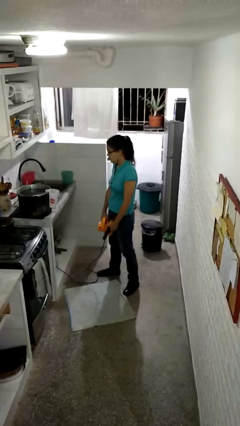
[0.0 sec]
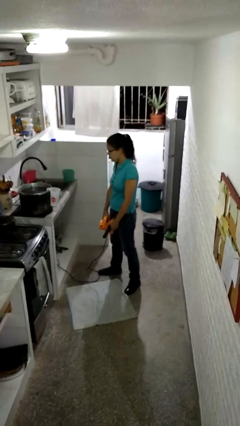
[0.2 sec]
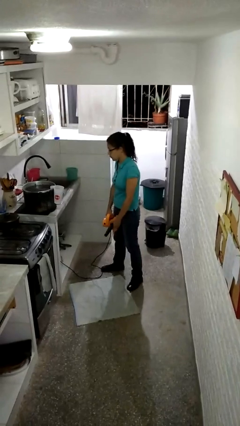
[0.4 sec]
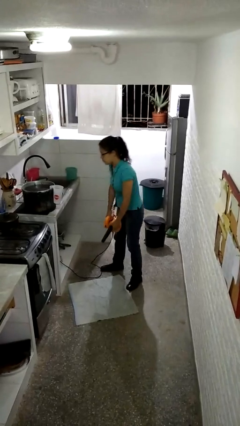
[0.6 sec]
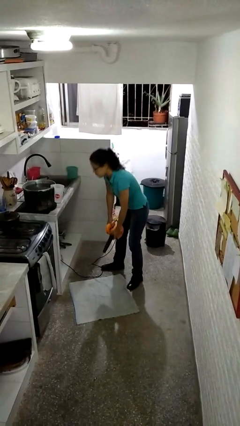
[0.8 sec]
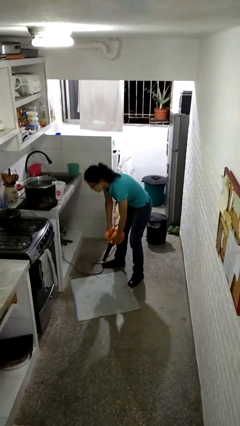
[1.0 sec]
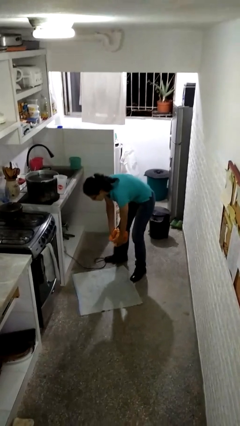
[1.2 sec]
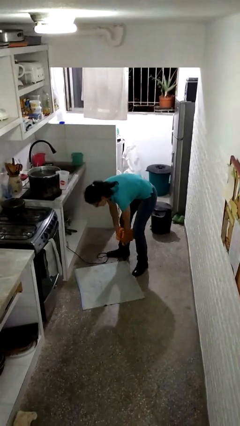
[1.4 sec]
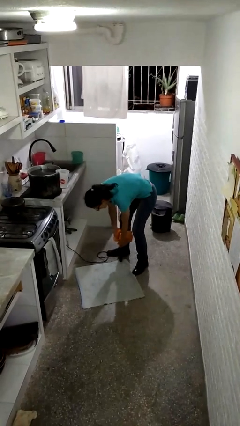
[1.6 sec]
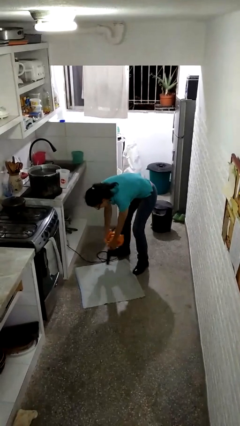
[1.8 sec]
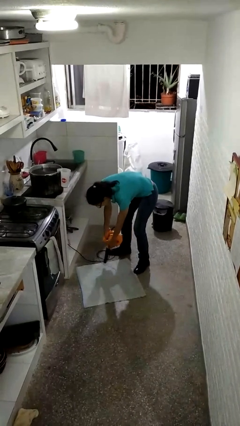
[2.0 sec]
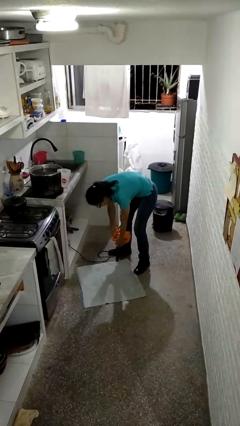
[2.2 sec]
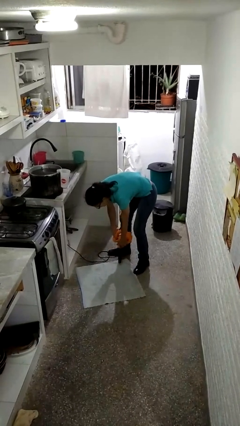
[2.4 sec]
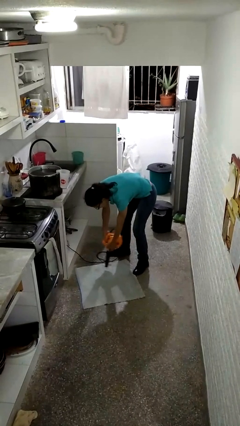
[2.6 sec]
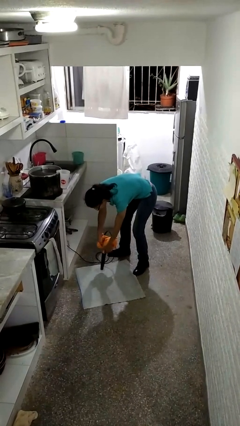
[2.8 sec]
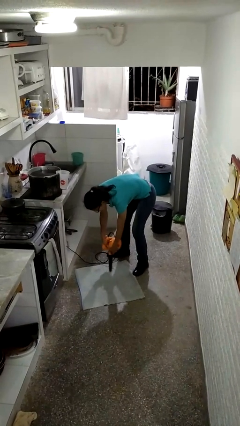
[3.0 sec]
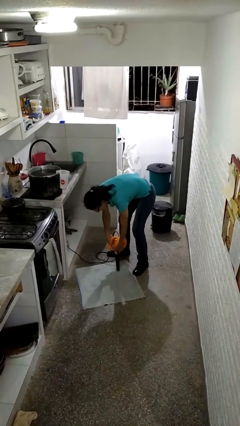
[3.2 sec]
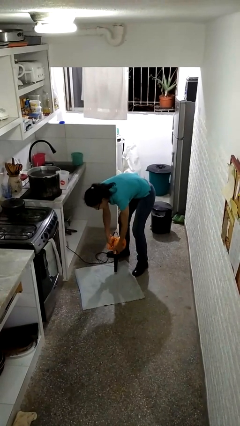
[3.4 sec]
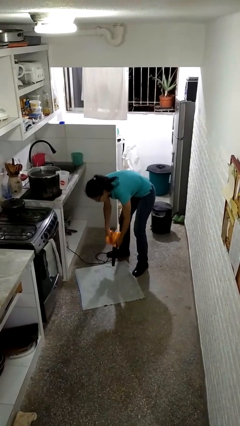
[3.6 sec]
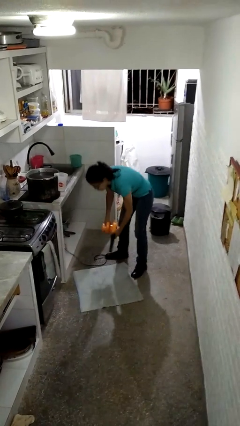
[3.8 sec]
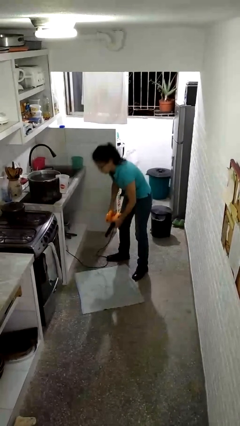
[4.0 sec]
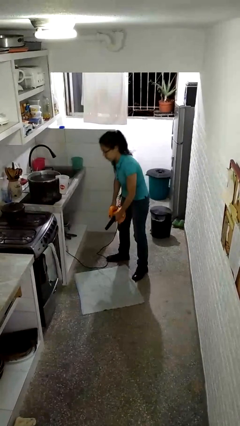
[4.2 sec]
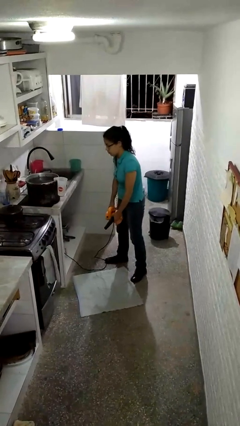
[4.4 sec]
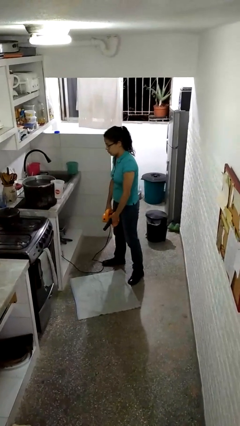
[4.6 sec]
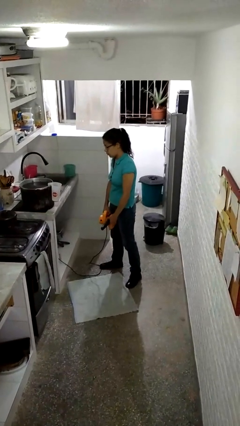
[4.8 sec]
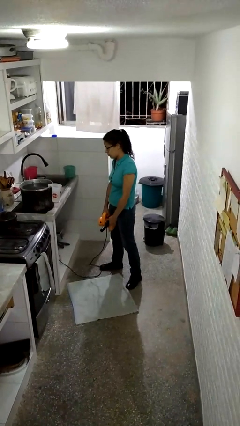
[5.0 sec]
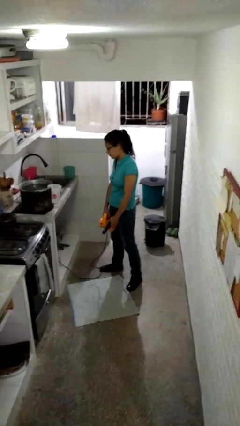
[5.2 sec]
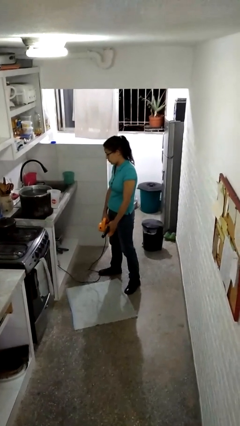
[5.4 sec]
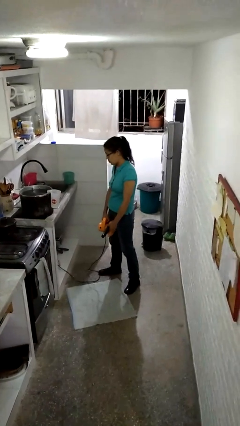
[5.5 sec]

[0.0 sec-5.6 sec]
person vacuums carpet

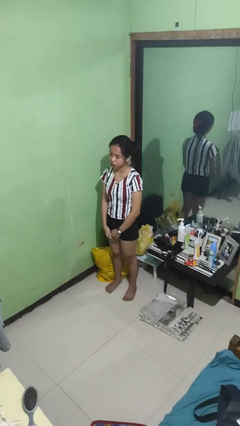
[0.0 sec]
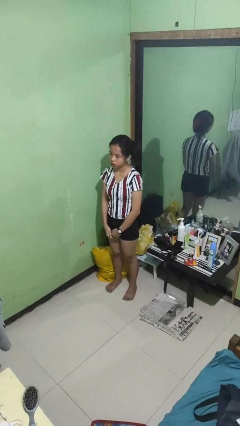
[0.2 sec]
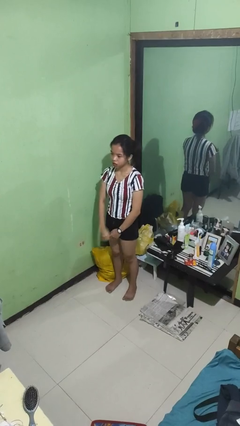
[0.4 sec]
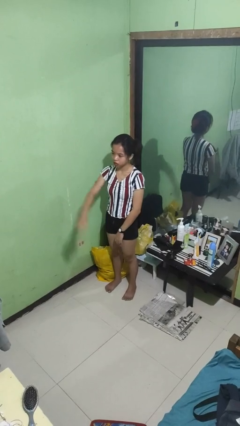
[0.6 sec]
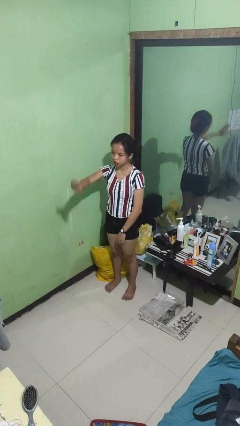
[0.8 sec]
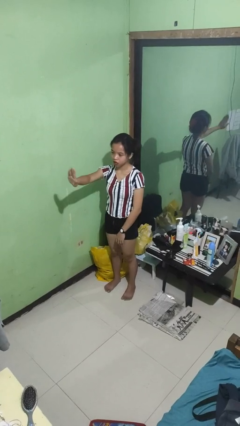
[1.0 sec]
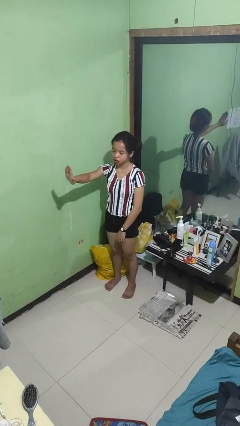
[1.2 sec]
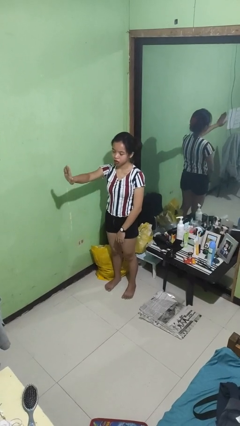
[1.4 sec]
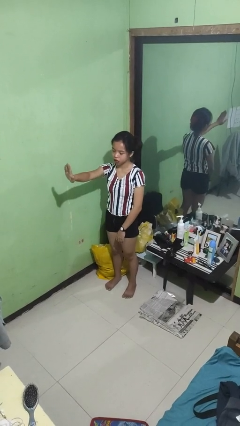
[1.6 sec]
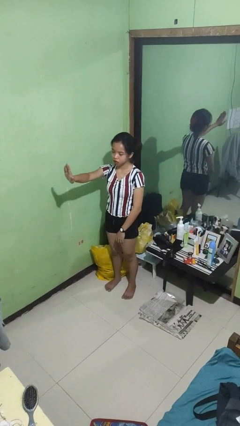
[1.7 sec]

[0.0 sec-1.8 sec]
person gestures stop

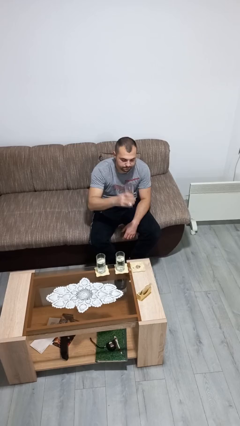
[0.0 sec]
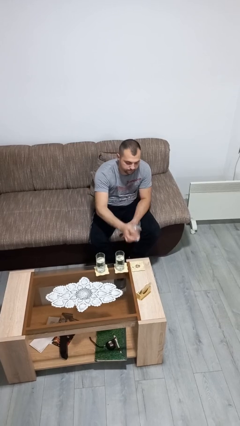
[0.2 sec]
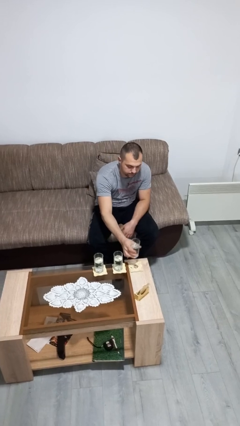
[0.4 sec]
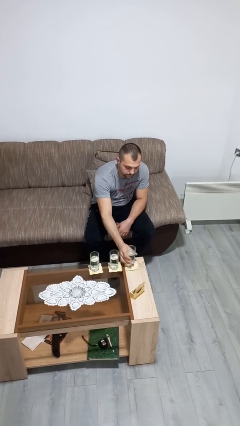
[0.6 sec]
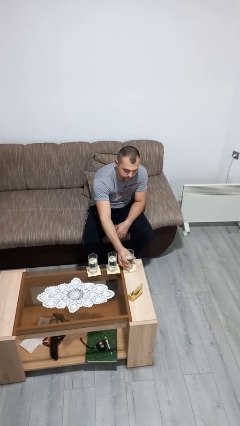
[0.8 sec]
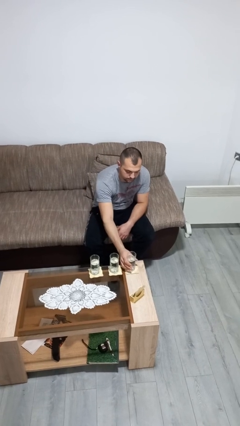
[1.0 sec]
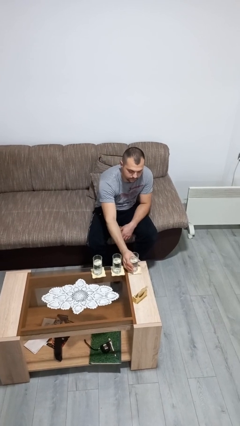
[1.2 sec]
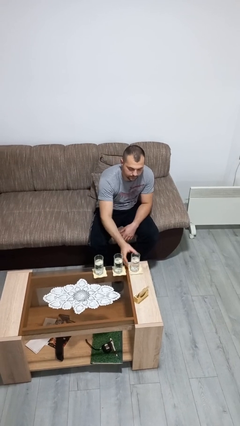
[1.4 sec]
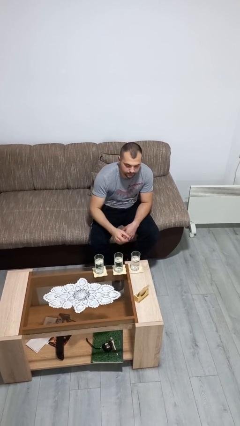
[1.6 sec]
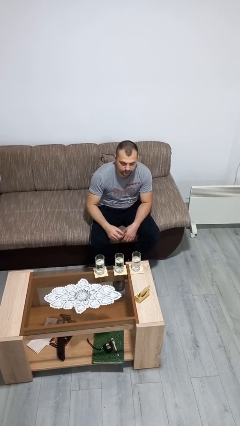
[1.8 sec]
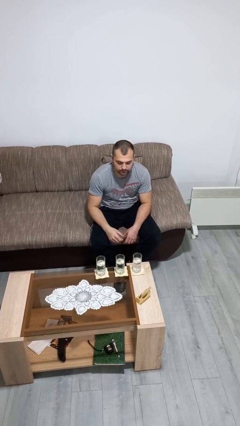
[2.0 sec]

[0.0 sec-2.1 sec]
person puts down object on table

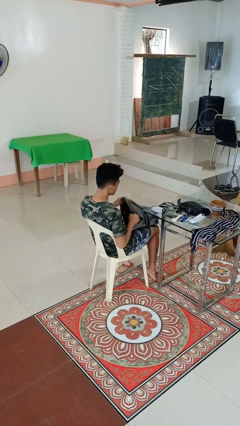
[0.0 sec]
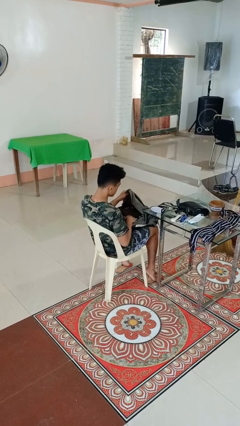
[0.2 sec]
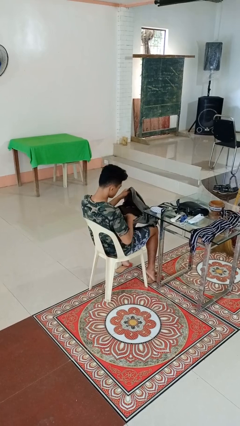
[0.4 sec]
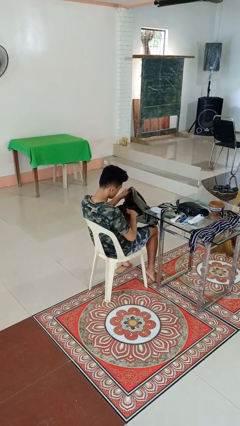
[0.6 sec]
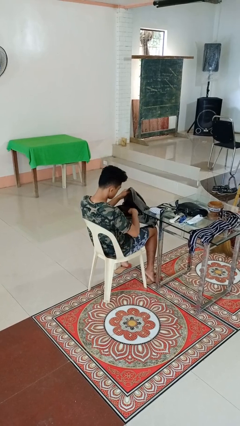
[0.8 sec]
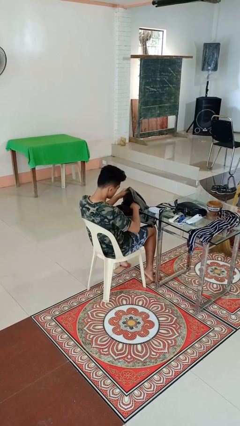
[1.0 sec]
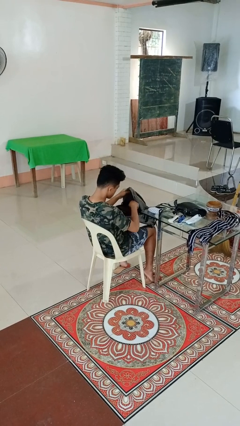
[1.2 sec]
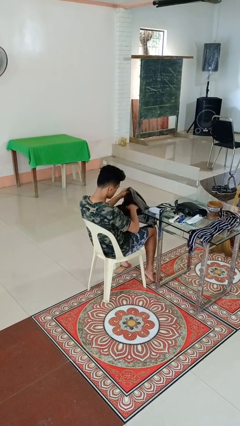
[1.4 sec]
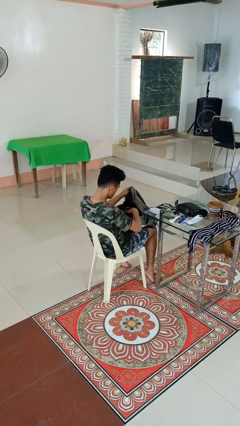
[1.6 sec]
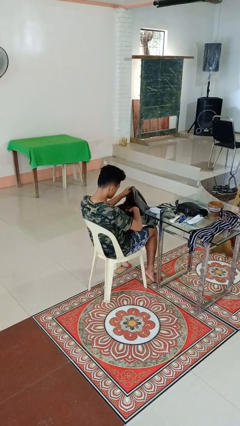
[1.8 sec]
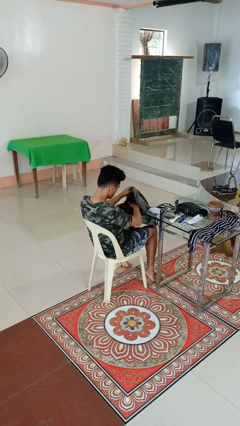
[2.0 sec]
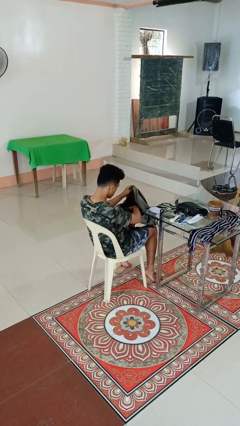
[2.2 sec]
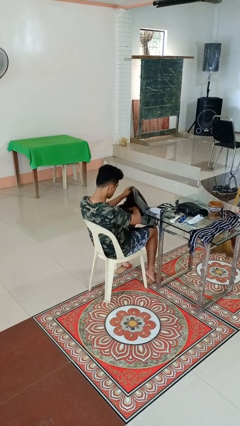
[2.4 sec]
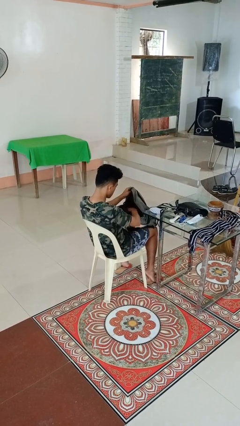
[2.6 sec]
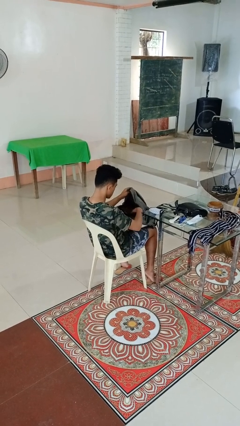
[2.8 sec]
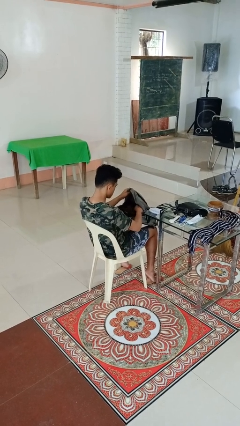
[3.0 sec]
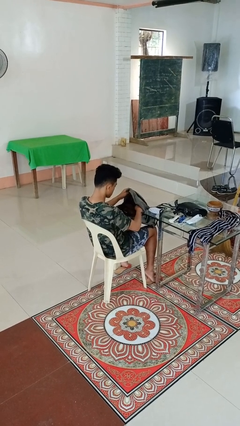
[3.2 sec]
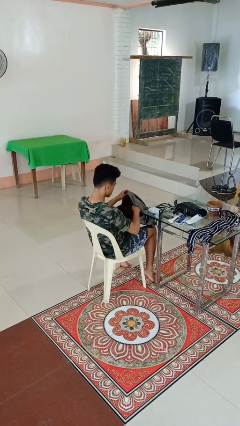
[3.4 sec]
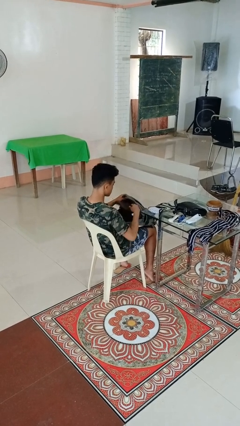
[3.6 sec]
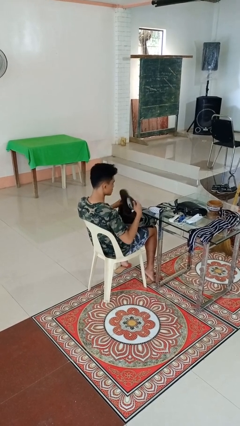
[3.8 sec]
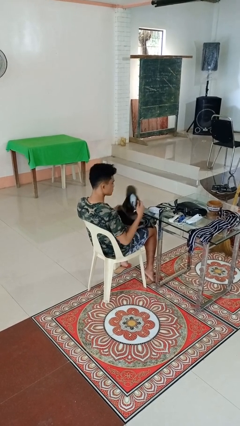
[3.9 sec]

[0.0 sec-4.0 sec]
person searches in backpack

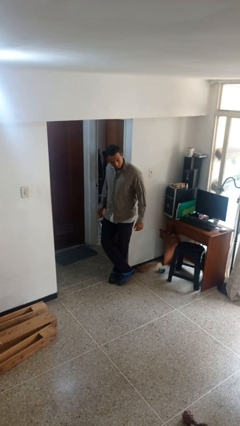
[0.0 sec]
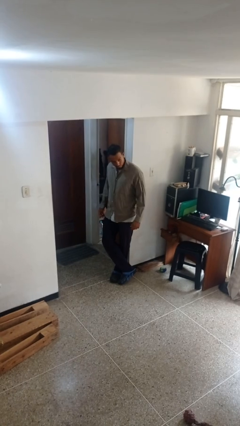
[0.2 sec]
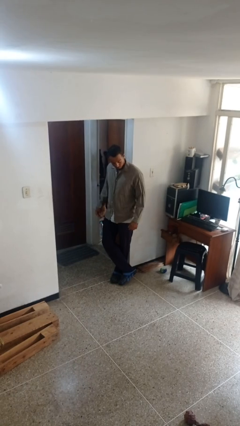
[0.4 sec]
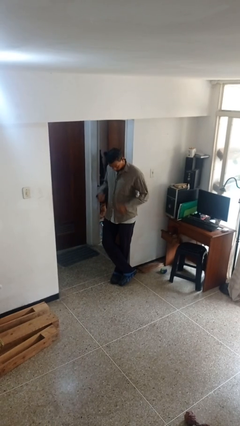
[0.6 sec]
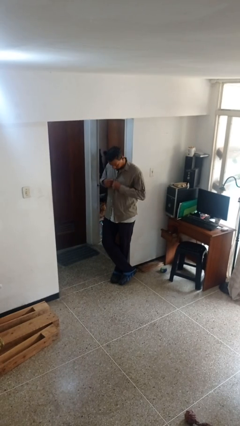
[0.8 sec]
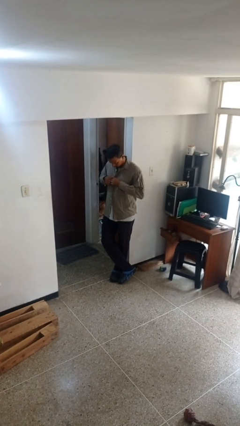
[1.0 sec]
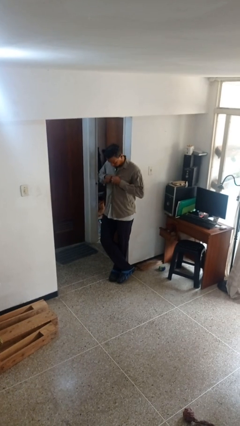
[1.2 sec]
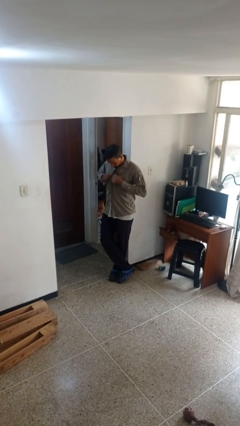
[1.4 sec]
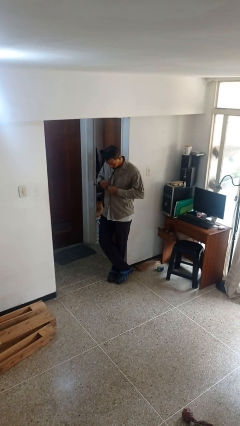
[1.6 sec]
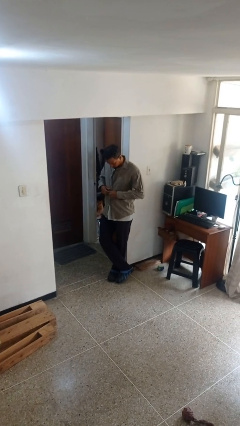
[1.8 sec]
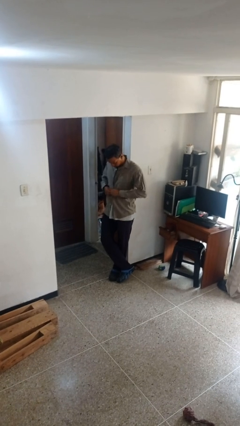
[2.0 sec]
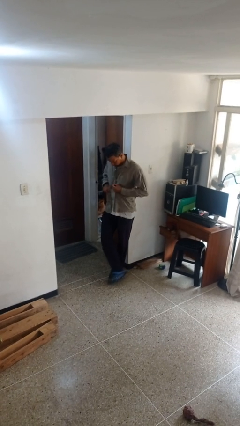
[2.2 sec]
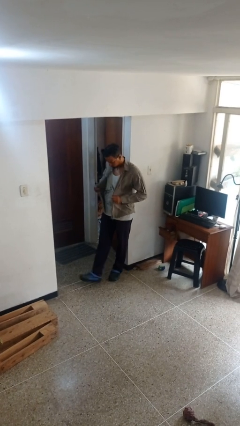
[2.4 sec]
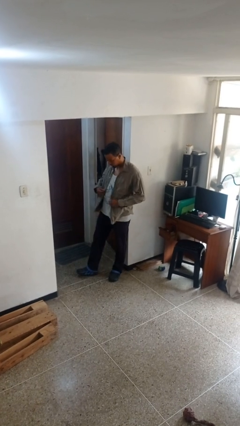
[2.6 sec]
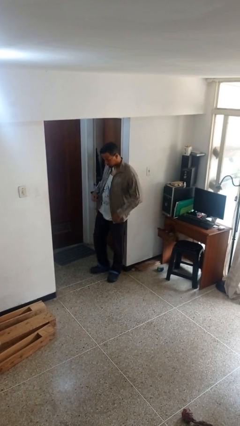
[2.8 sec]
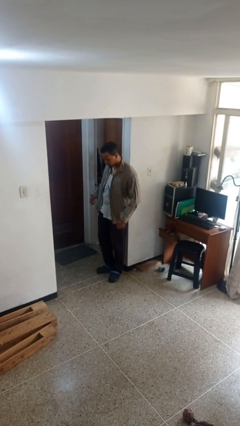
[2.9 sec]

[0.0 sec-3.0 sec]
person unbuttons shirt

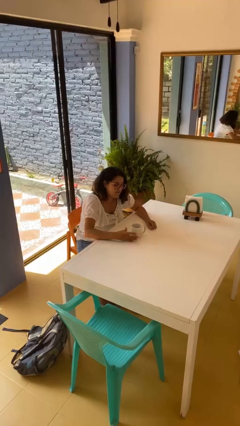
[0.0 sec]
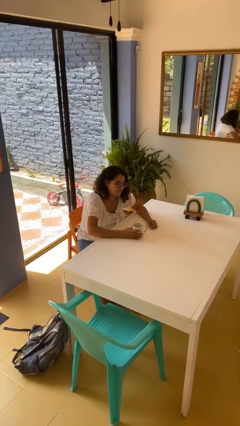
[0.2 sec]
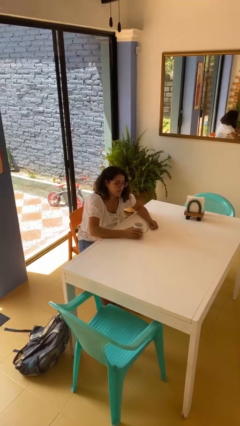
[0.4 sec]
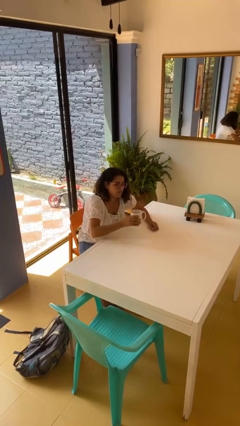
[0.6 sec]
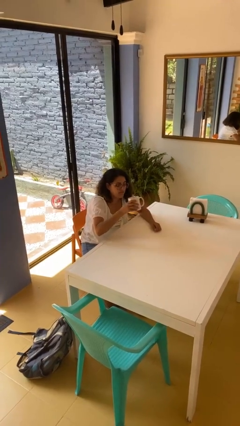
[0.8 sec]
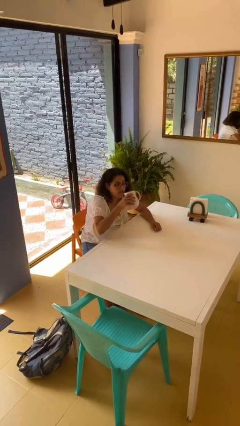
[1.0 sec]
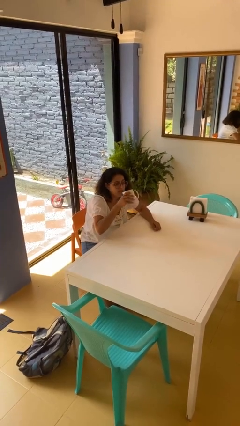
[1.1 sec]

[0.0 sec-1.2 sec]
person picks up object from table
